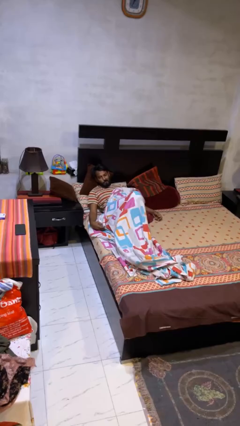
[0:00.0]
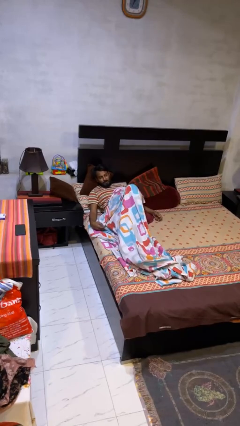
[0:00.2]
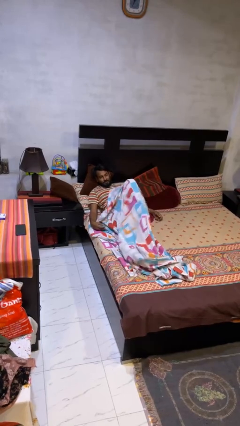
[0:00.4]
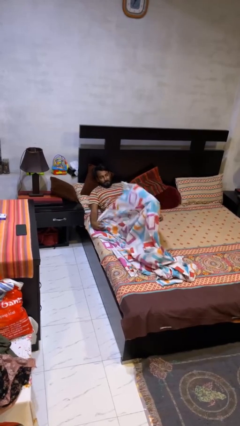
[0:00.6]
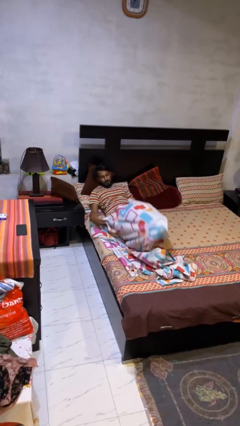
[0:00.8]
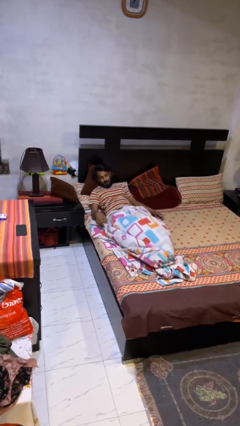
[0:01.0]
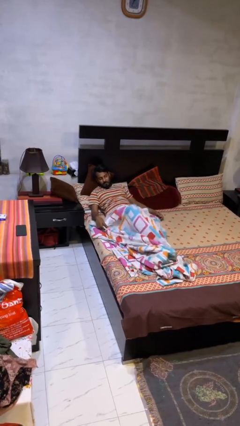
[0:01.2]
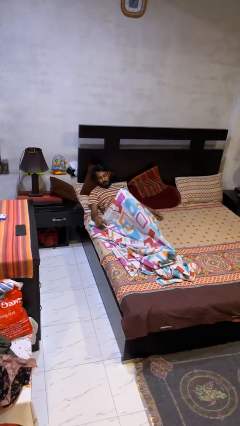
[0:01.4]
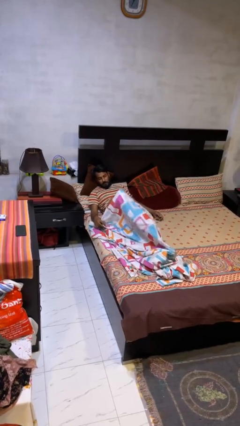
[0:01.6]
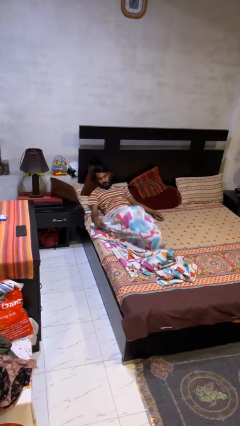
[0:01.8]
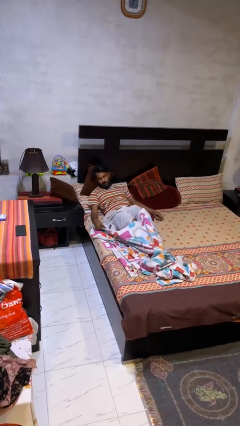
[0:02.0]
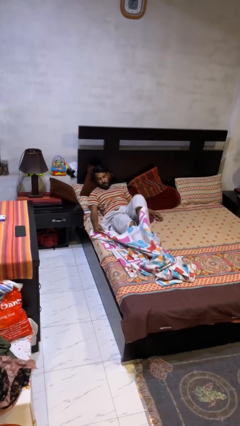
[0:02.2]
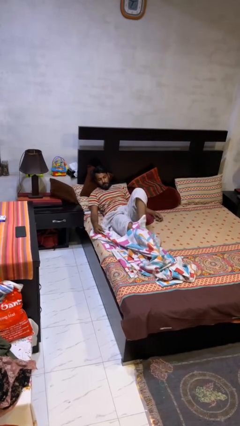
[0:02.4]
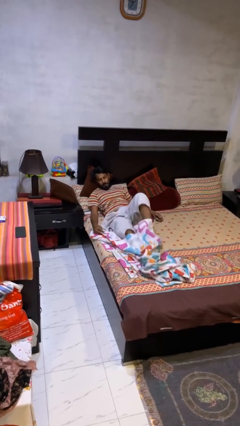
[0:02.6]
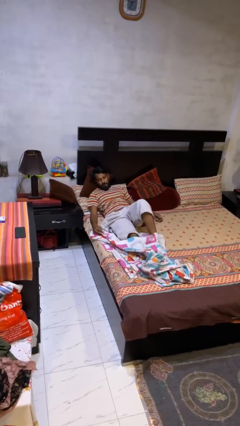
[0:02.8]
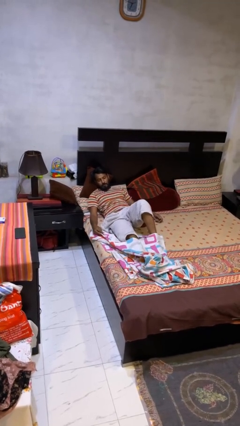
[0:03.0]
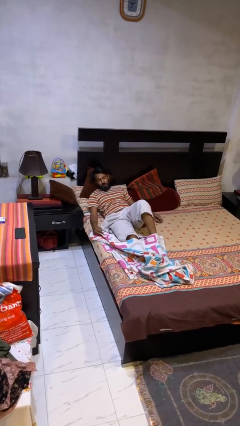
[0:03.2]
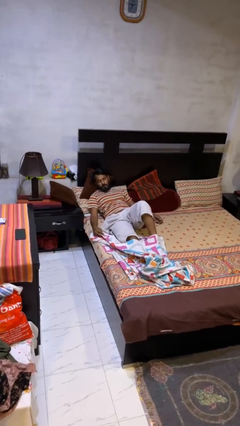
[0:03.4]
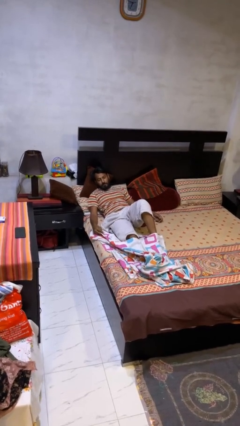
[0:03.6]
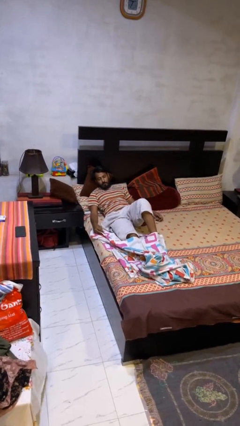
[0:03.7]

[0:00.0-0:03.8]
person uncovers with bedsheets

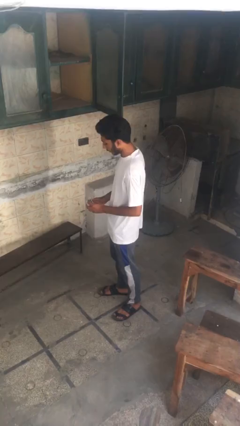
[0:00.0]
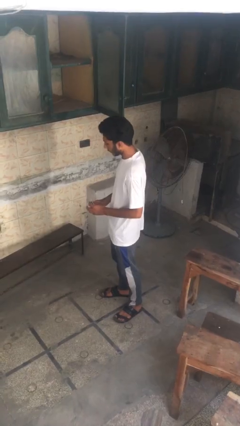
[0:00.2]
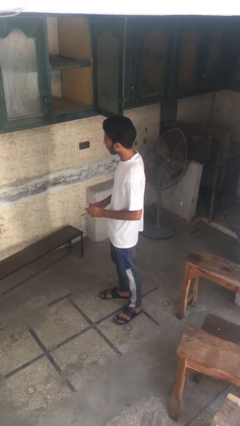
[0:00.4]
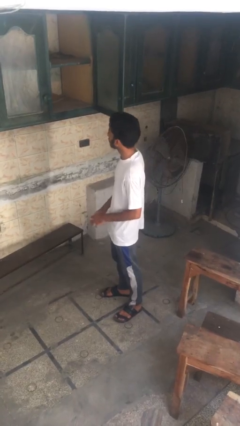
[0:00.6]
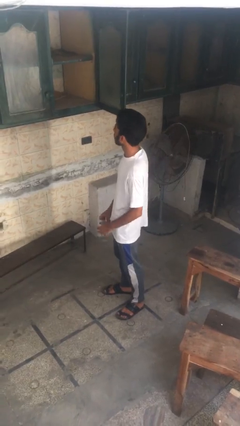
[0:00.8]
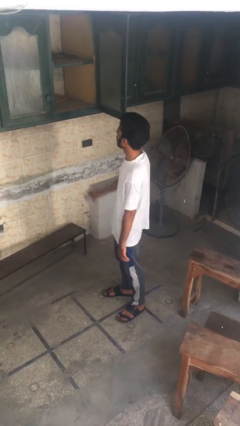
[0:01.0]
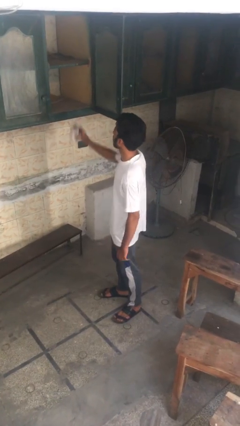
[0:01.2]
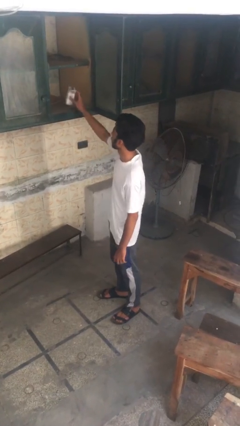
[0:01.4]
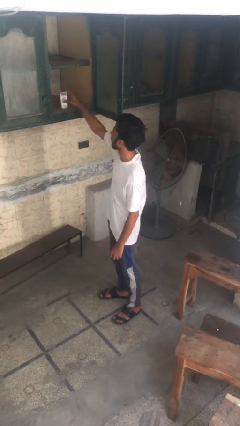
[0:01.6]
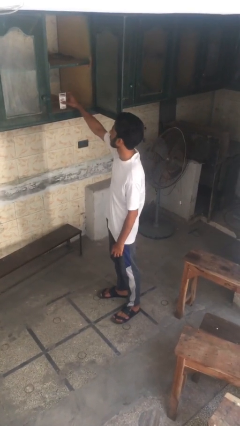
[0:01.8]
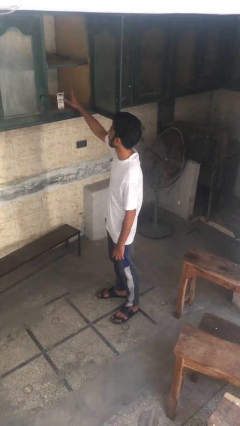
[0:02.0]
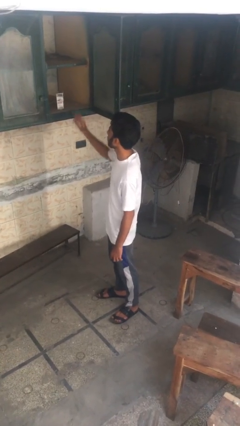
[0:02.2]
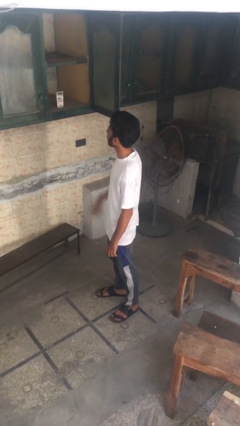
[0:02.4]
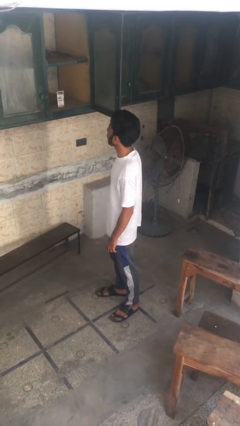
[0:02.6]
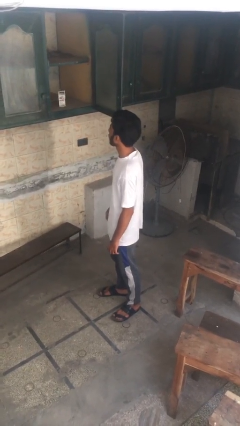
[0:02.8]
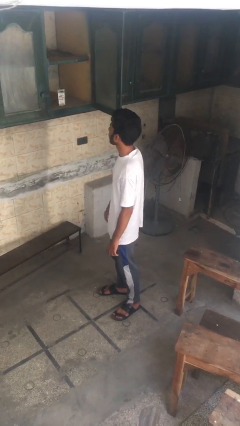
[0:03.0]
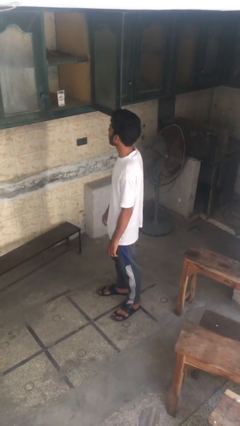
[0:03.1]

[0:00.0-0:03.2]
person puts object in cabinet

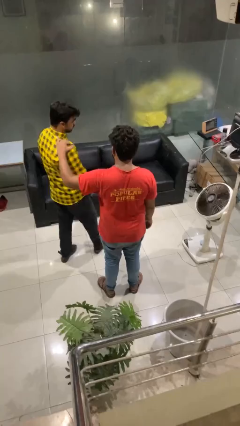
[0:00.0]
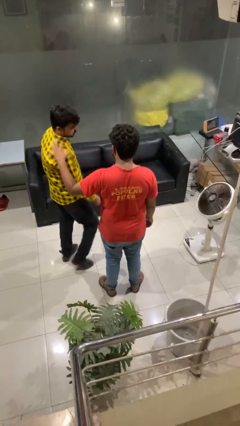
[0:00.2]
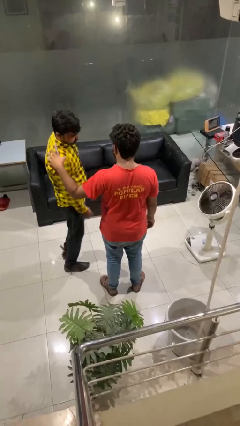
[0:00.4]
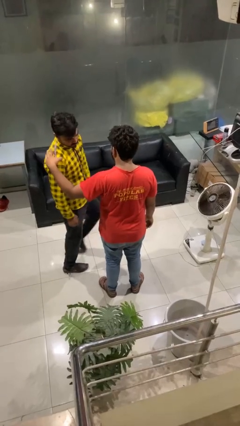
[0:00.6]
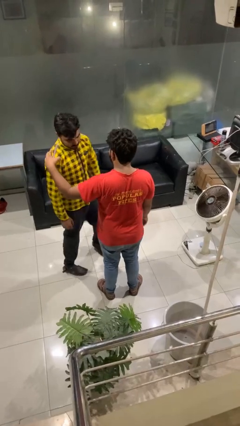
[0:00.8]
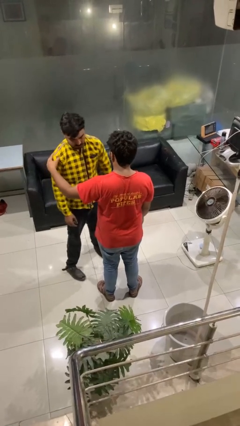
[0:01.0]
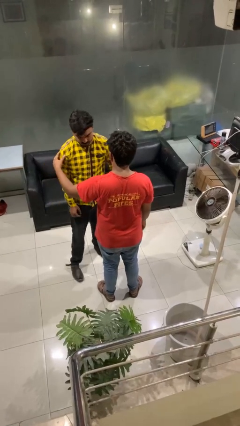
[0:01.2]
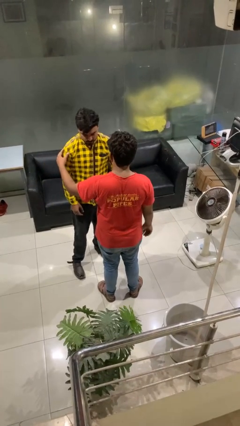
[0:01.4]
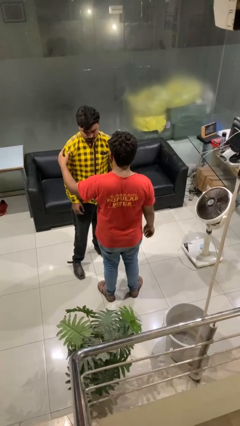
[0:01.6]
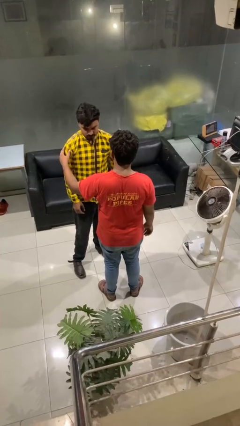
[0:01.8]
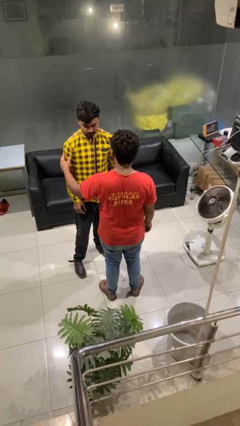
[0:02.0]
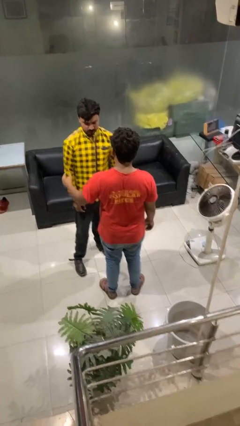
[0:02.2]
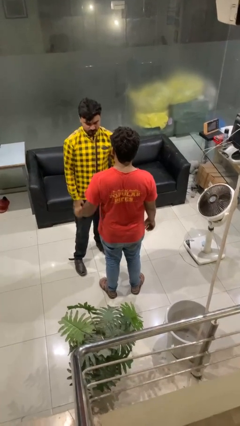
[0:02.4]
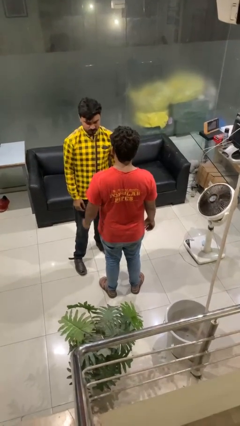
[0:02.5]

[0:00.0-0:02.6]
person spins person around

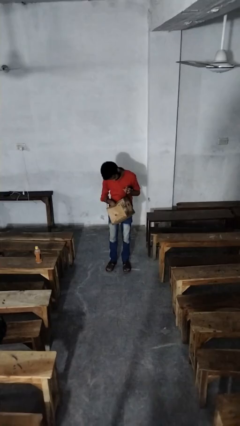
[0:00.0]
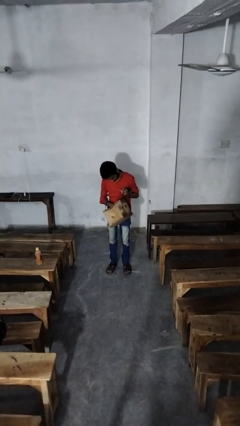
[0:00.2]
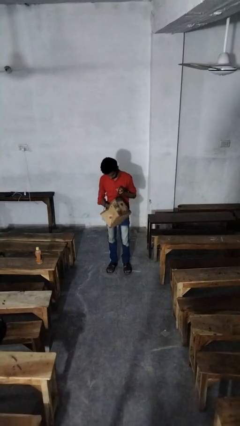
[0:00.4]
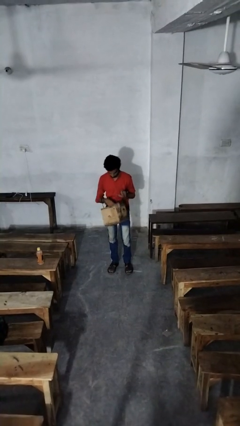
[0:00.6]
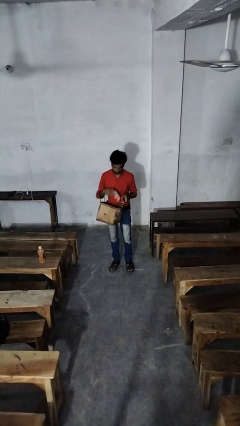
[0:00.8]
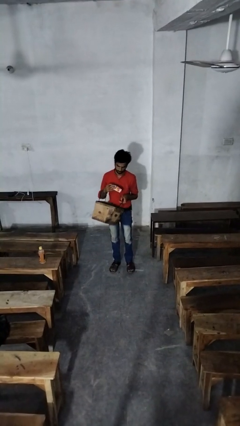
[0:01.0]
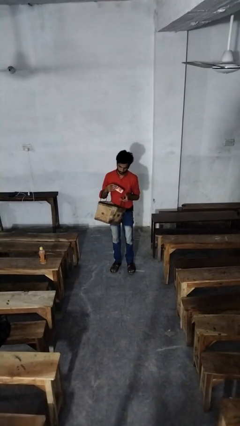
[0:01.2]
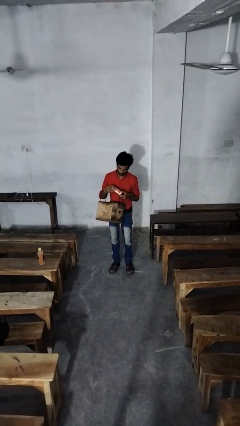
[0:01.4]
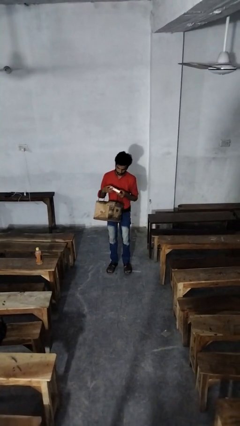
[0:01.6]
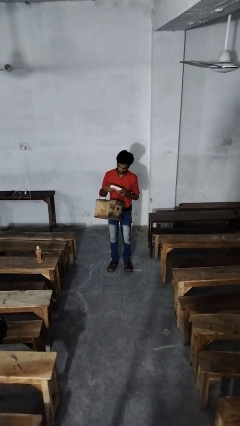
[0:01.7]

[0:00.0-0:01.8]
person takes object from purse
